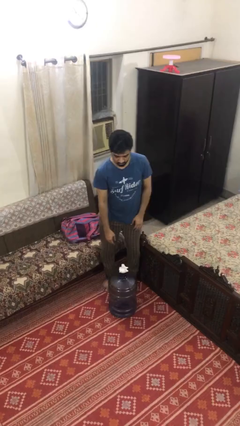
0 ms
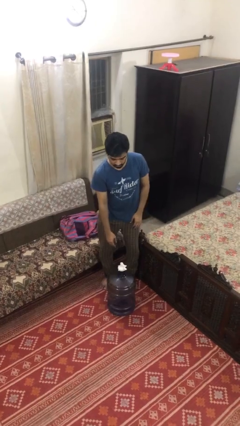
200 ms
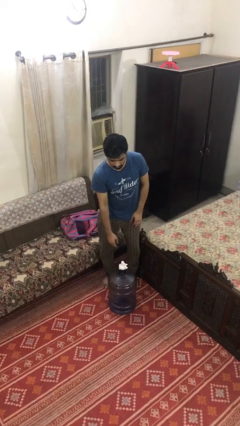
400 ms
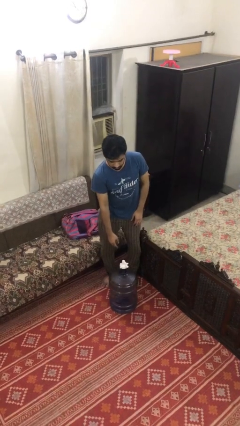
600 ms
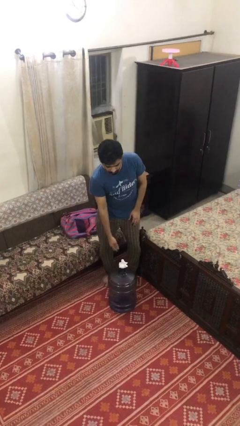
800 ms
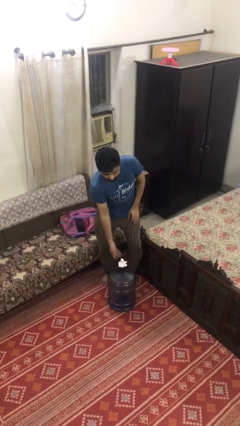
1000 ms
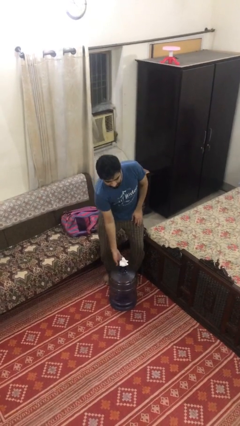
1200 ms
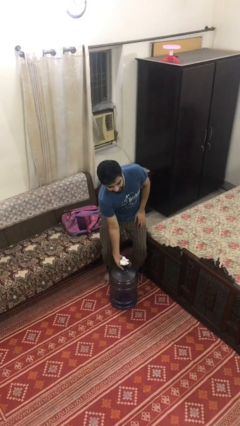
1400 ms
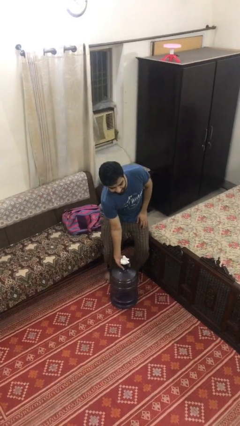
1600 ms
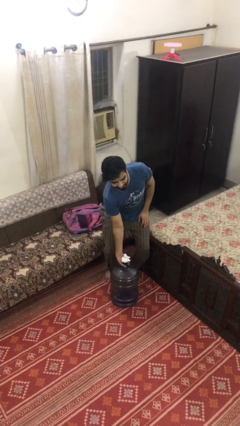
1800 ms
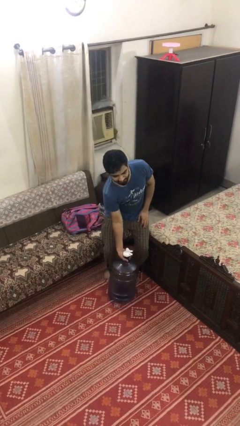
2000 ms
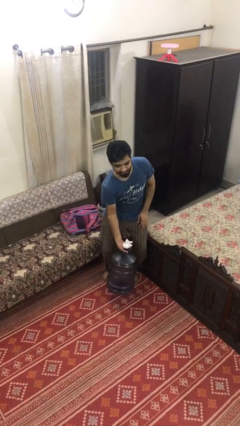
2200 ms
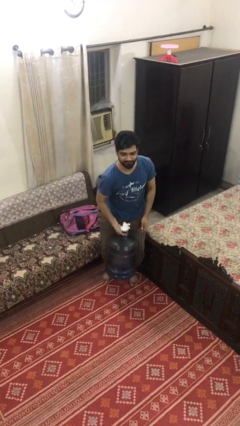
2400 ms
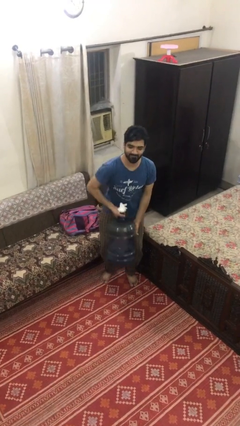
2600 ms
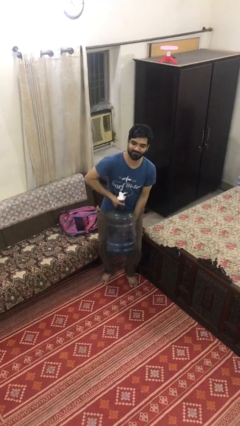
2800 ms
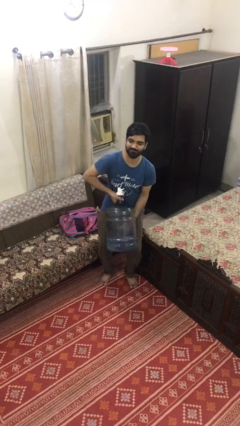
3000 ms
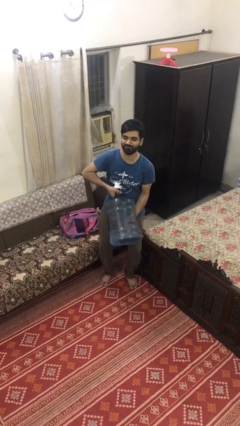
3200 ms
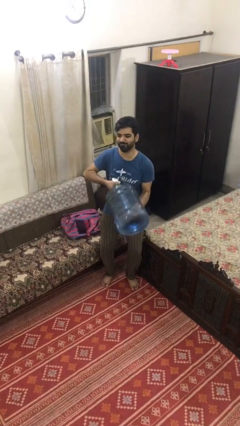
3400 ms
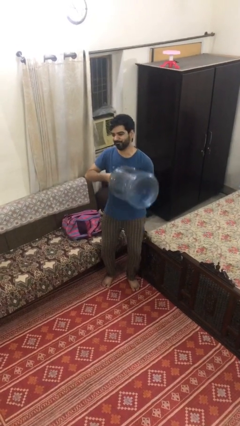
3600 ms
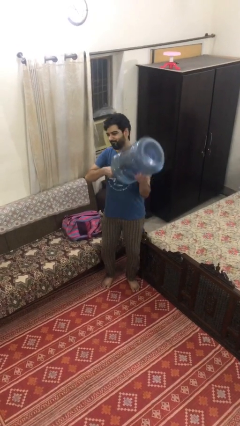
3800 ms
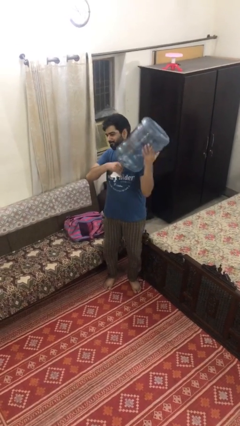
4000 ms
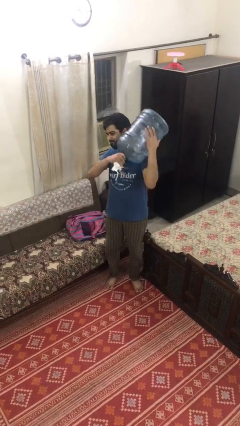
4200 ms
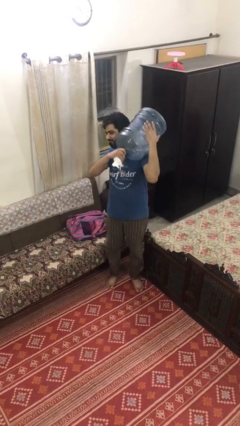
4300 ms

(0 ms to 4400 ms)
person picks up object from floor

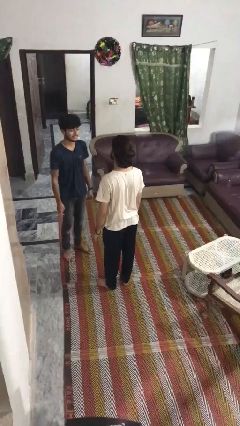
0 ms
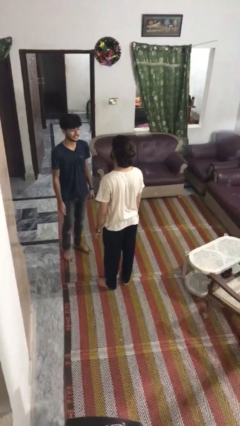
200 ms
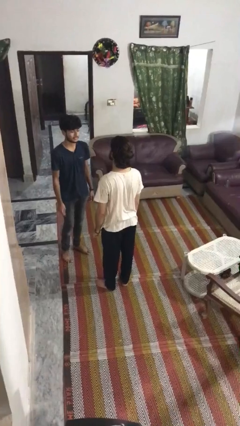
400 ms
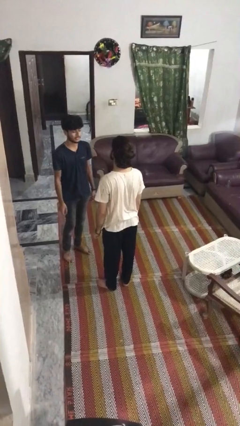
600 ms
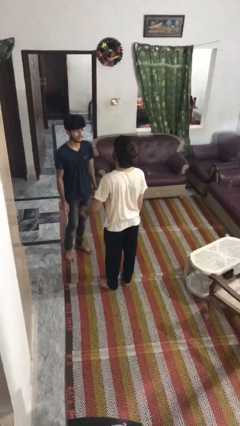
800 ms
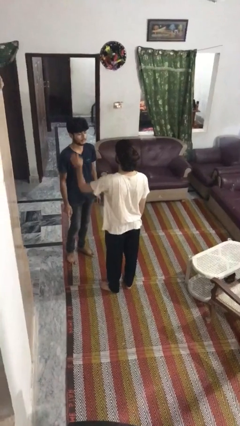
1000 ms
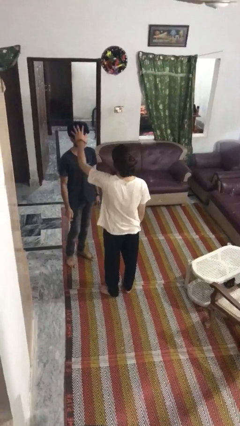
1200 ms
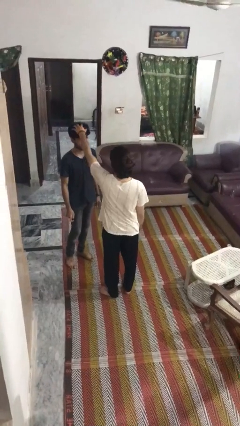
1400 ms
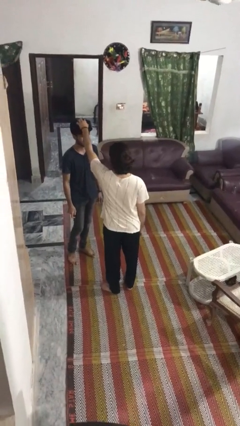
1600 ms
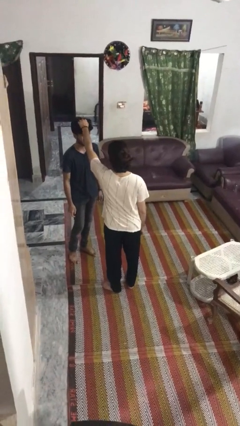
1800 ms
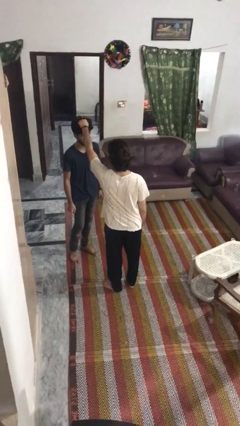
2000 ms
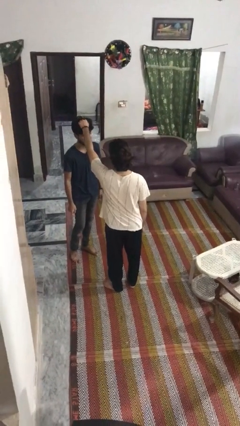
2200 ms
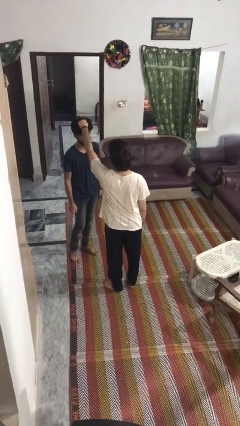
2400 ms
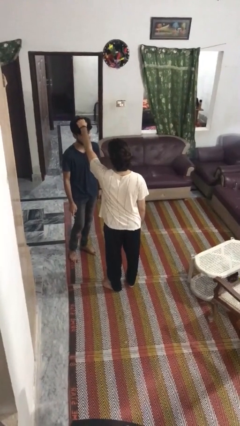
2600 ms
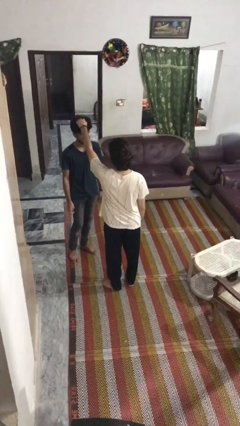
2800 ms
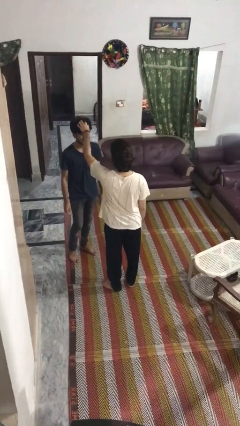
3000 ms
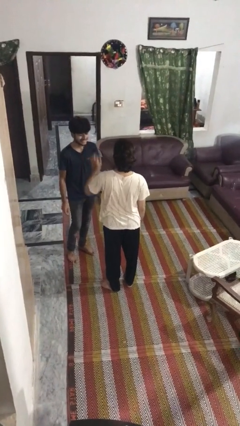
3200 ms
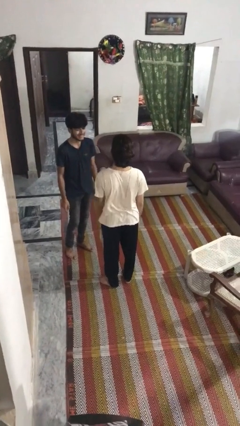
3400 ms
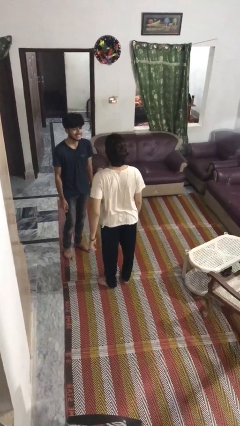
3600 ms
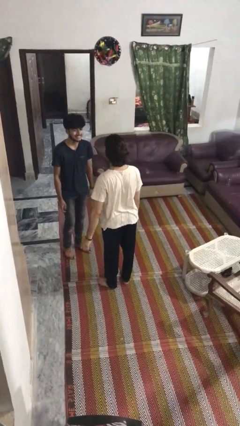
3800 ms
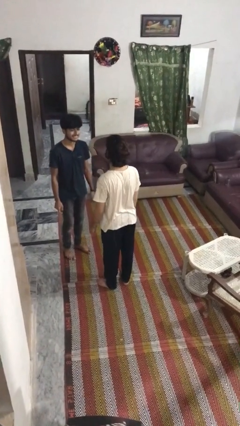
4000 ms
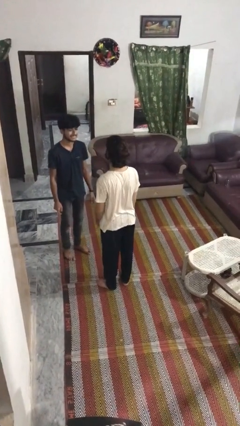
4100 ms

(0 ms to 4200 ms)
person grabs person by hair

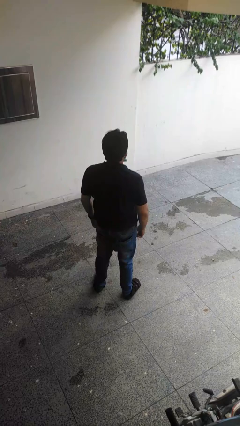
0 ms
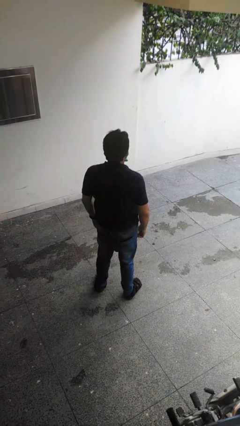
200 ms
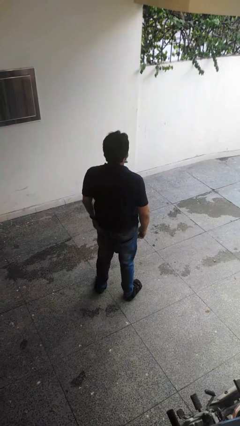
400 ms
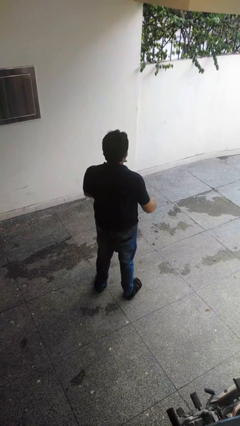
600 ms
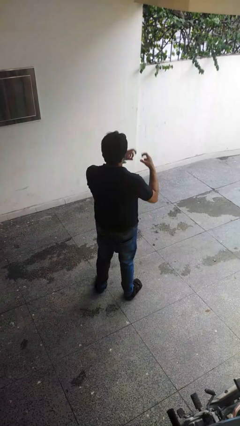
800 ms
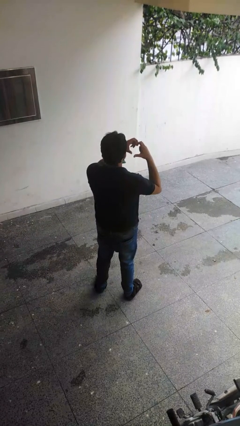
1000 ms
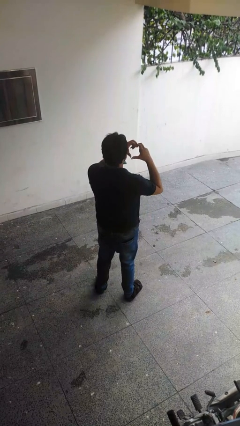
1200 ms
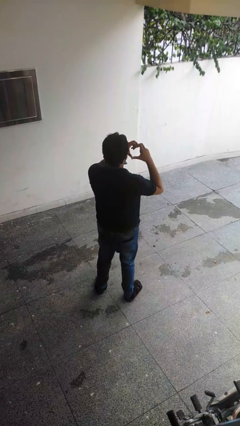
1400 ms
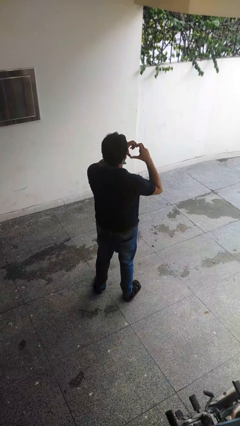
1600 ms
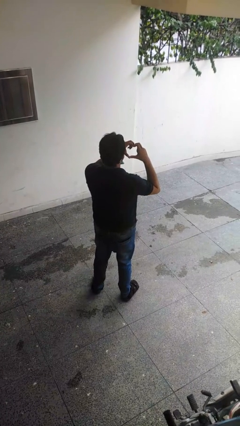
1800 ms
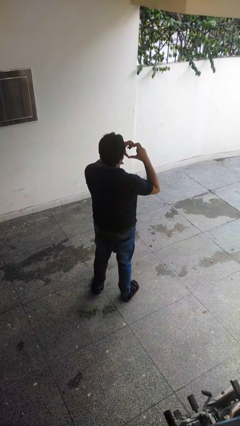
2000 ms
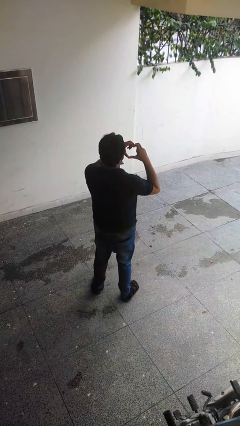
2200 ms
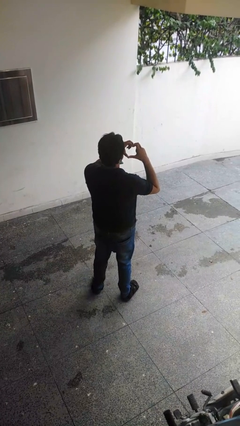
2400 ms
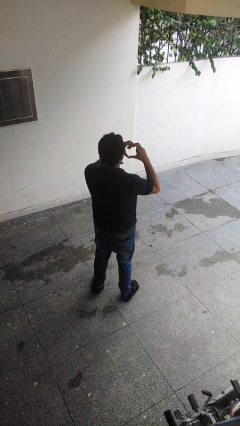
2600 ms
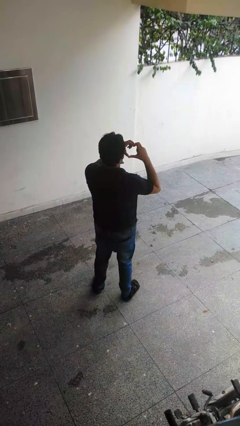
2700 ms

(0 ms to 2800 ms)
person gestures heart

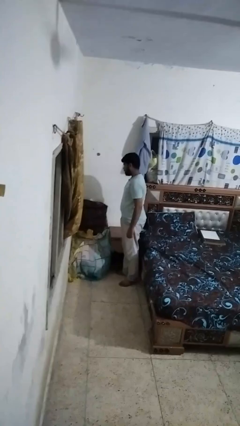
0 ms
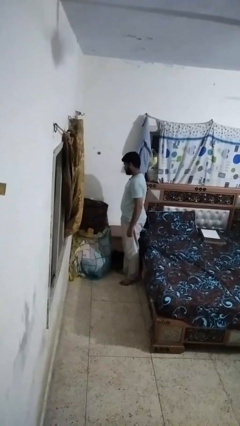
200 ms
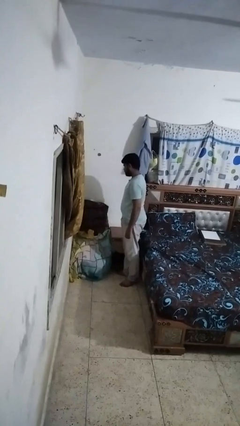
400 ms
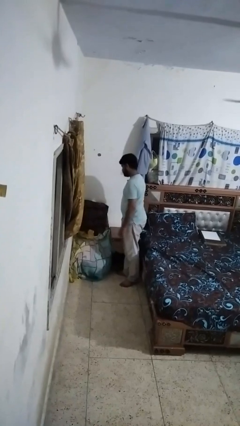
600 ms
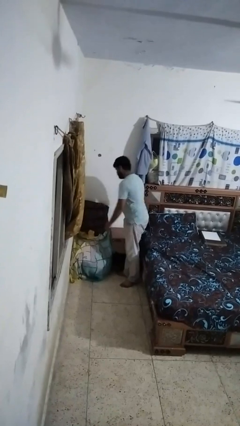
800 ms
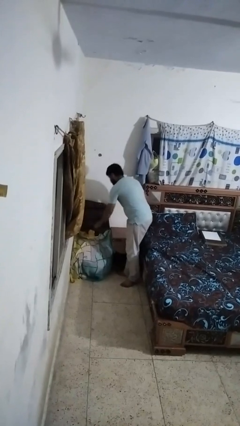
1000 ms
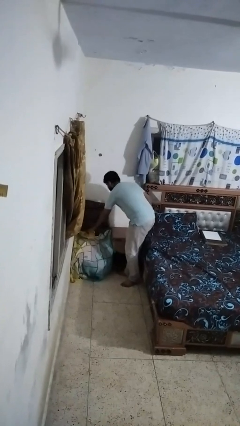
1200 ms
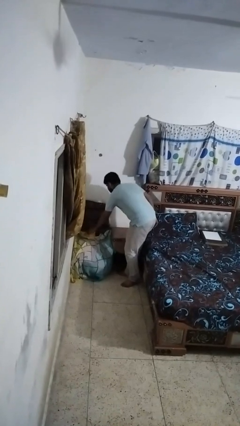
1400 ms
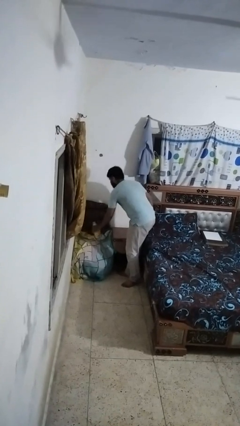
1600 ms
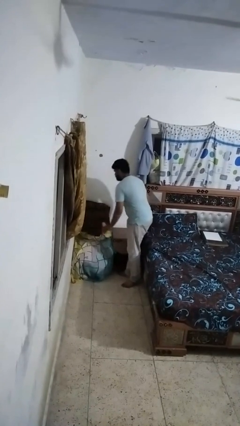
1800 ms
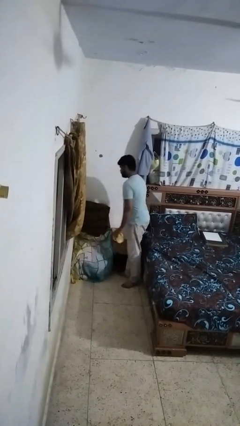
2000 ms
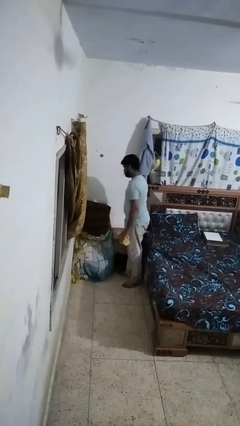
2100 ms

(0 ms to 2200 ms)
person picks up object from couch

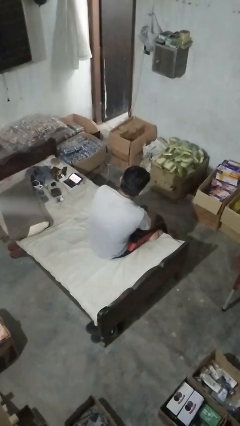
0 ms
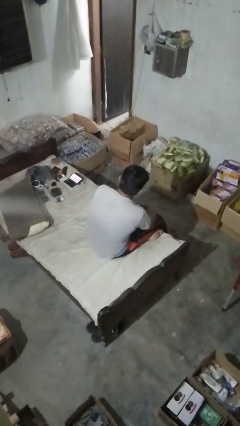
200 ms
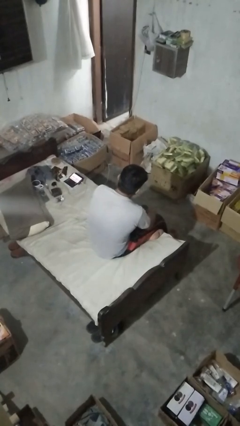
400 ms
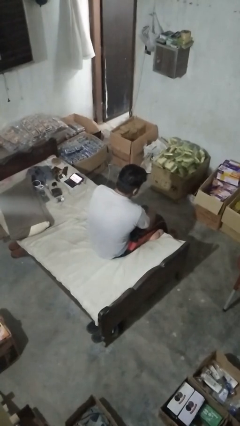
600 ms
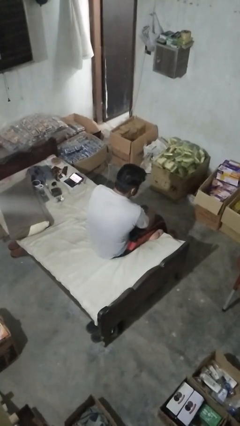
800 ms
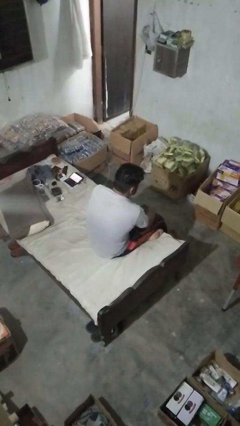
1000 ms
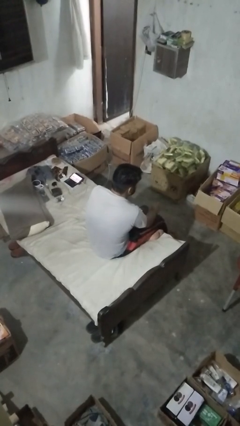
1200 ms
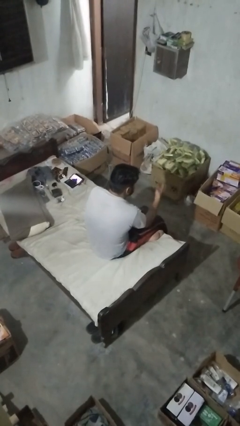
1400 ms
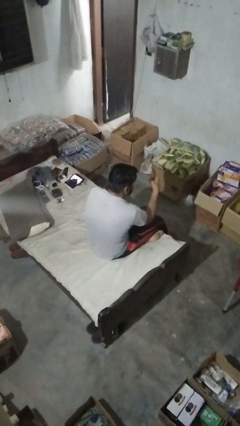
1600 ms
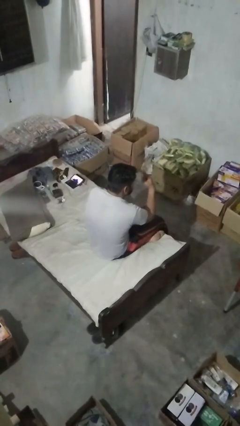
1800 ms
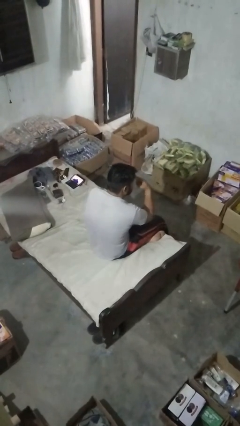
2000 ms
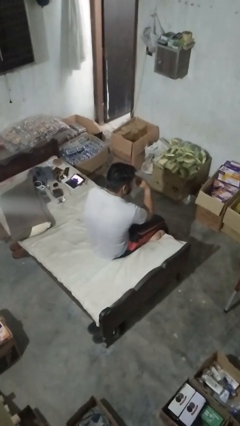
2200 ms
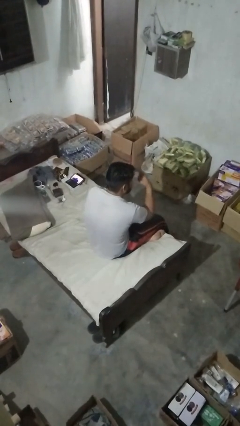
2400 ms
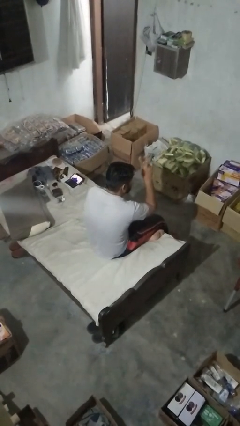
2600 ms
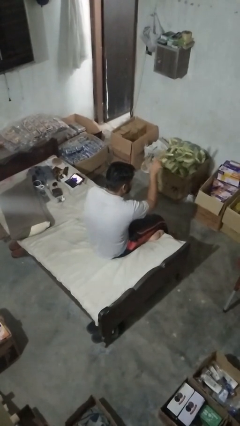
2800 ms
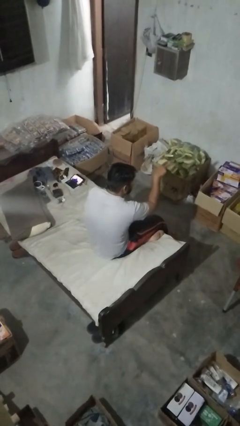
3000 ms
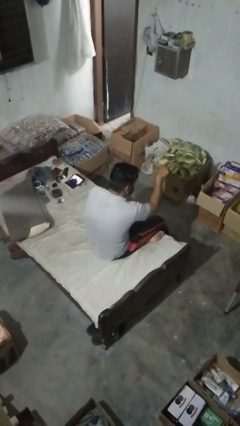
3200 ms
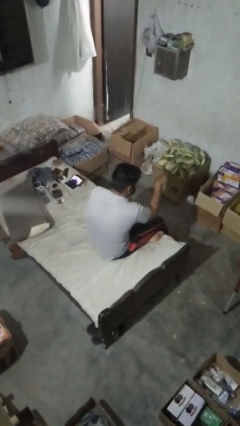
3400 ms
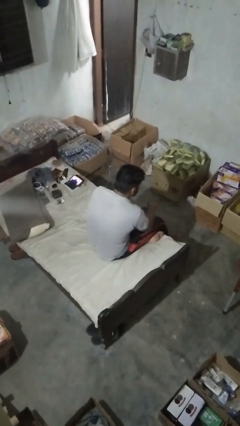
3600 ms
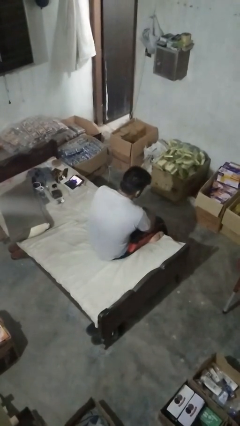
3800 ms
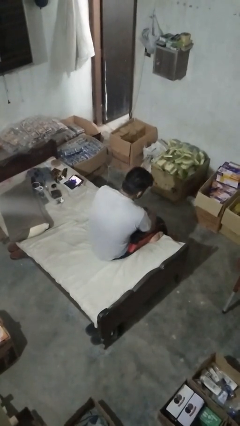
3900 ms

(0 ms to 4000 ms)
person gestures watch closely
